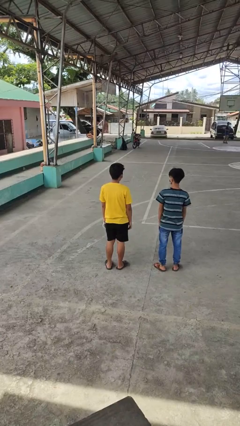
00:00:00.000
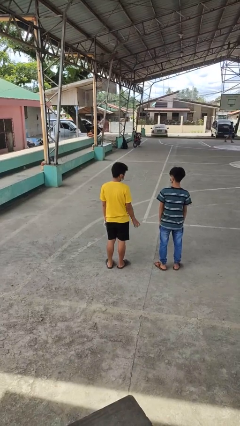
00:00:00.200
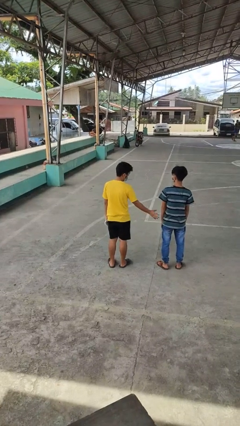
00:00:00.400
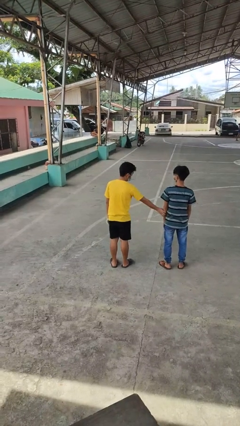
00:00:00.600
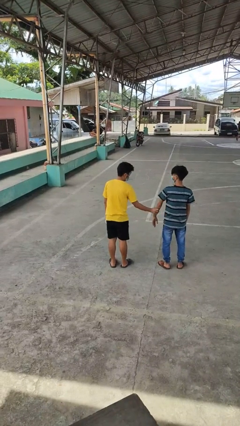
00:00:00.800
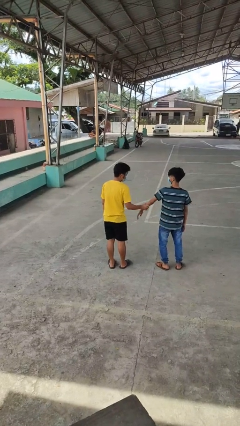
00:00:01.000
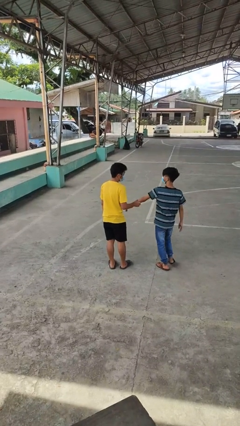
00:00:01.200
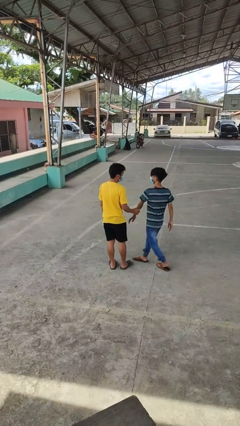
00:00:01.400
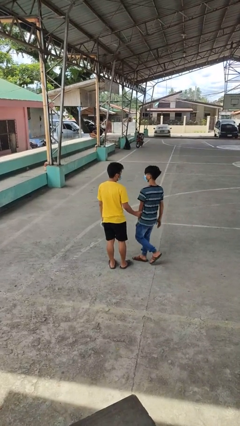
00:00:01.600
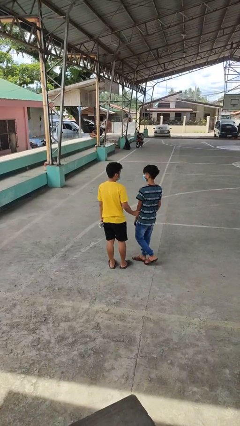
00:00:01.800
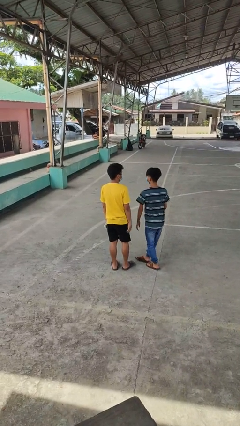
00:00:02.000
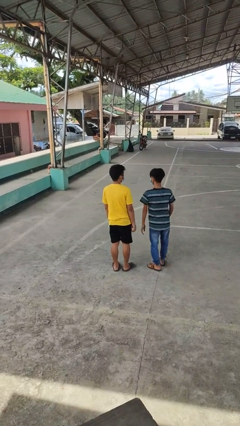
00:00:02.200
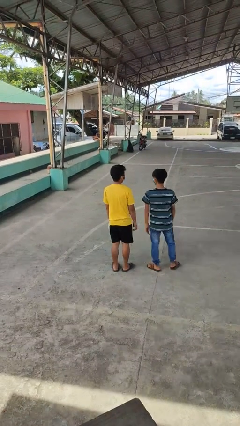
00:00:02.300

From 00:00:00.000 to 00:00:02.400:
person grabs person by forearm

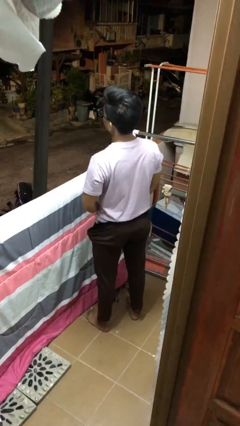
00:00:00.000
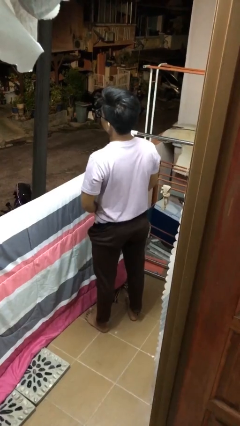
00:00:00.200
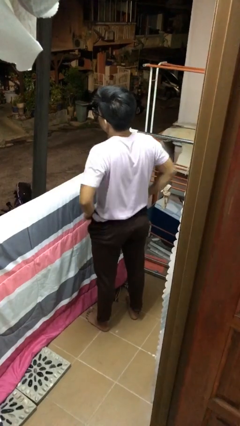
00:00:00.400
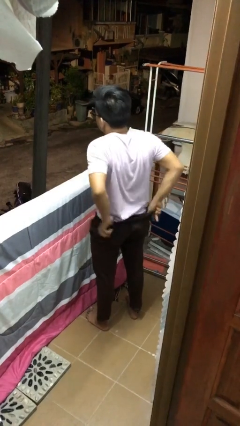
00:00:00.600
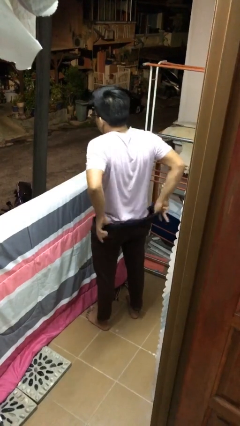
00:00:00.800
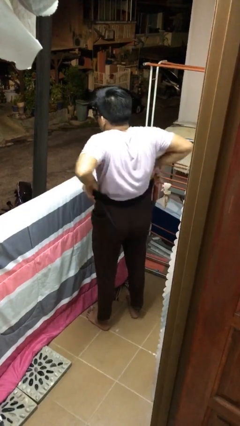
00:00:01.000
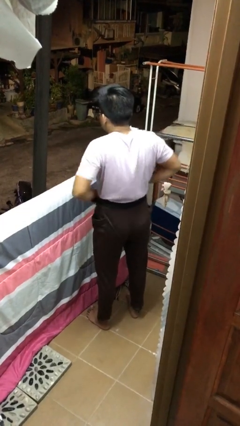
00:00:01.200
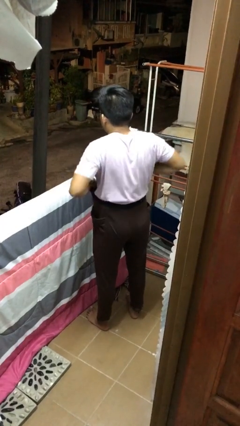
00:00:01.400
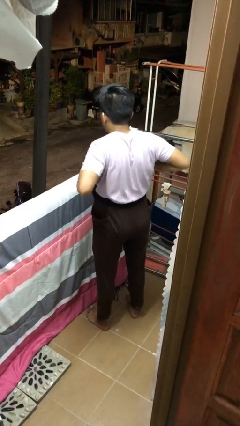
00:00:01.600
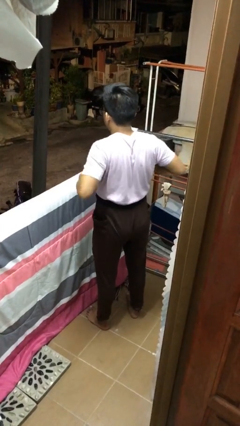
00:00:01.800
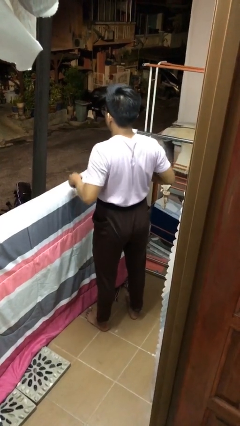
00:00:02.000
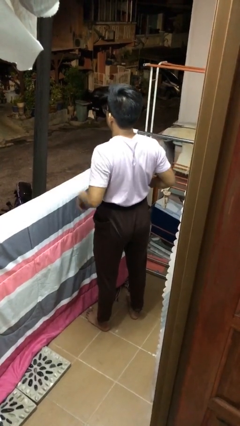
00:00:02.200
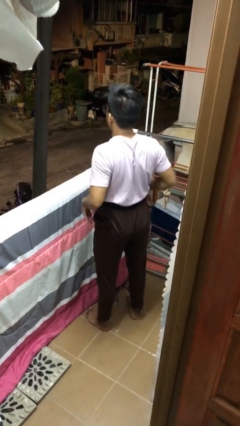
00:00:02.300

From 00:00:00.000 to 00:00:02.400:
person hikes up pants

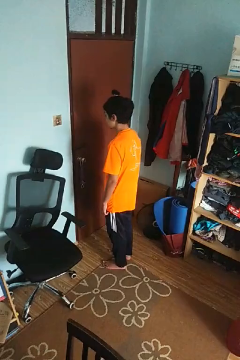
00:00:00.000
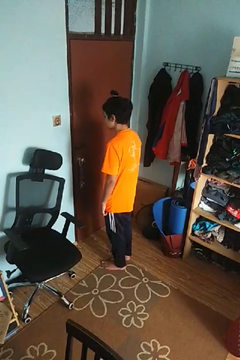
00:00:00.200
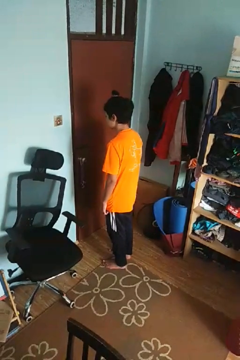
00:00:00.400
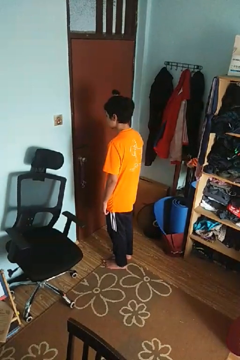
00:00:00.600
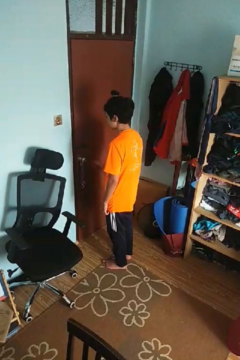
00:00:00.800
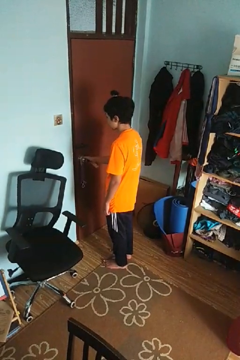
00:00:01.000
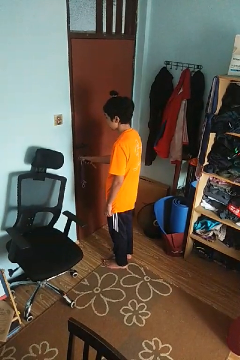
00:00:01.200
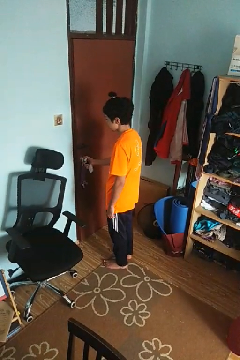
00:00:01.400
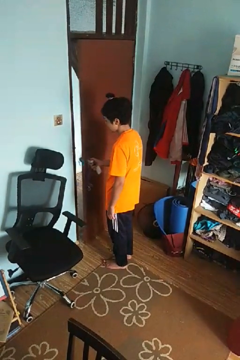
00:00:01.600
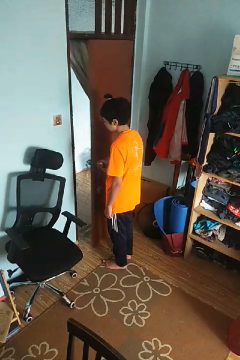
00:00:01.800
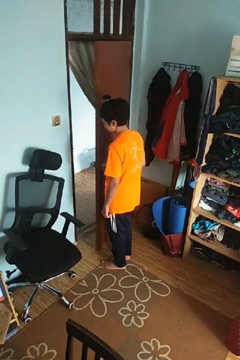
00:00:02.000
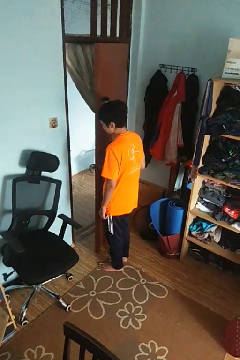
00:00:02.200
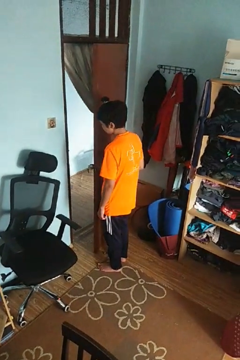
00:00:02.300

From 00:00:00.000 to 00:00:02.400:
person opens facility door

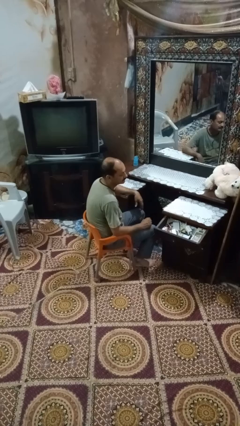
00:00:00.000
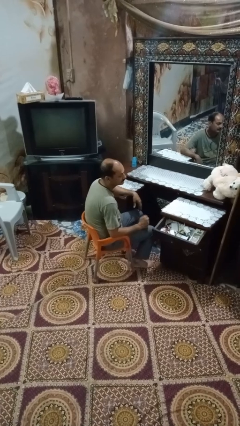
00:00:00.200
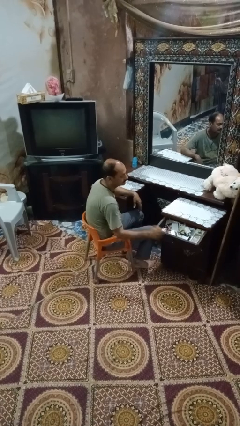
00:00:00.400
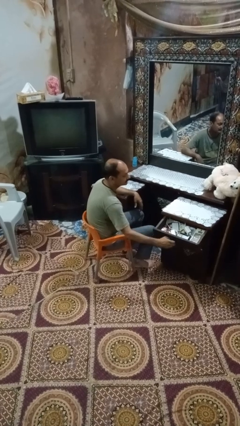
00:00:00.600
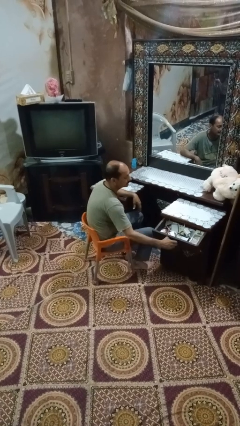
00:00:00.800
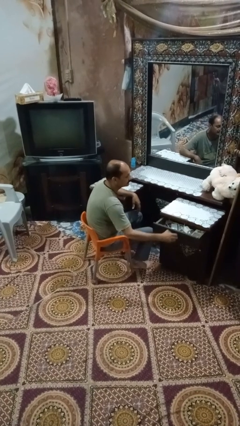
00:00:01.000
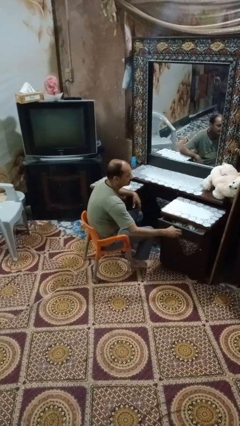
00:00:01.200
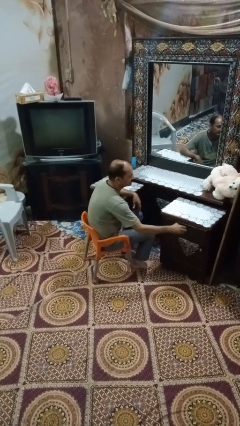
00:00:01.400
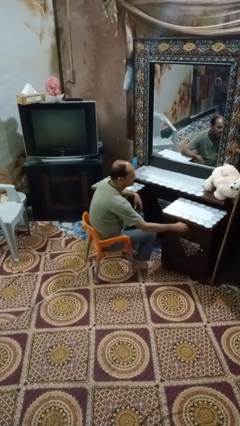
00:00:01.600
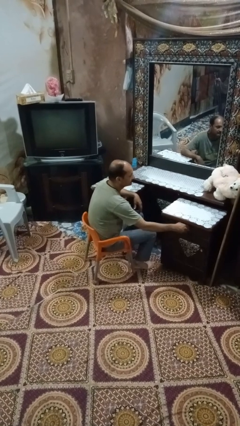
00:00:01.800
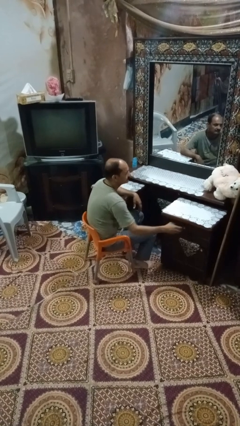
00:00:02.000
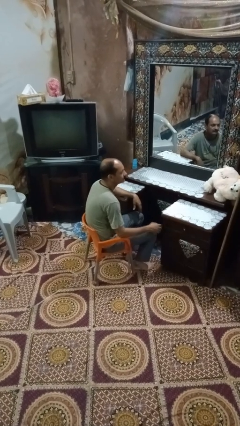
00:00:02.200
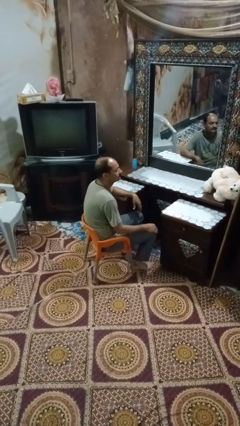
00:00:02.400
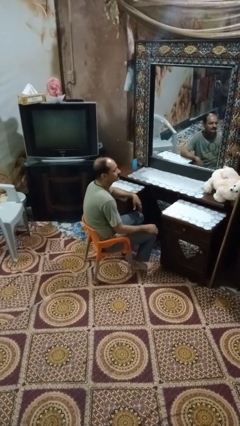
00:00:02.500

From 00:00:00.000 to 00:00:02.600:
person closes dresser drawer

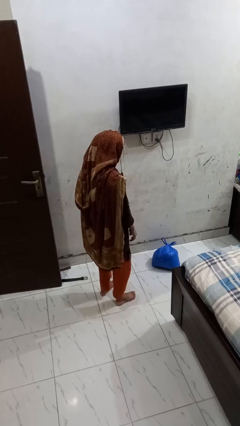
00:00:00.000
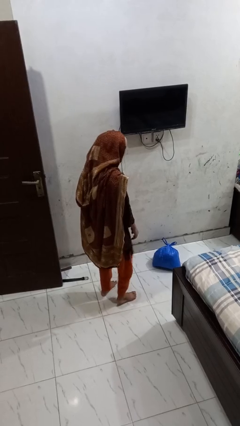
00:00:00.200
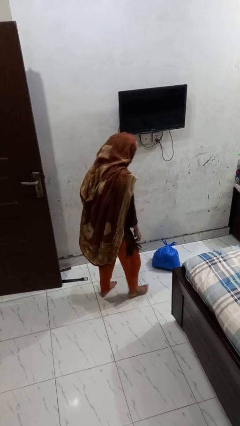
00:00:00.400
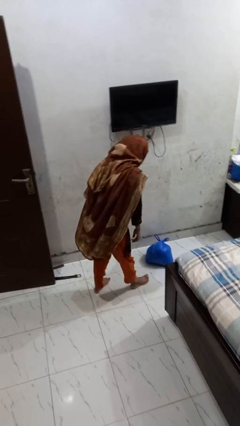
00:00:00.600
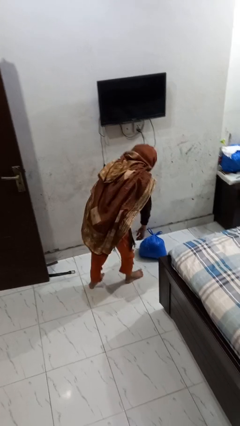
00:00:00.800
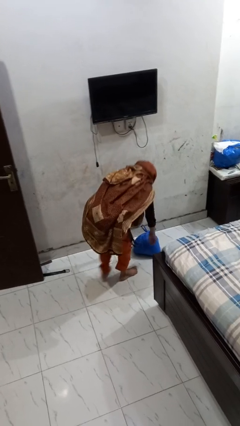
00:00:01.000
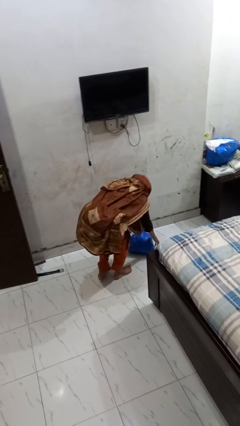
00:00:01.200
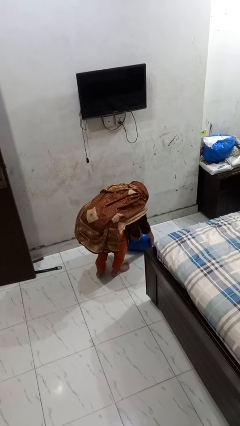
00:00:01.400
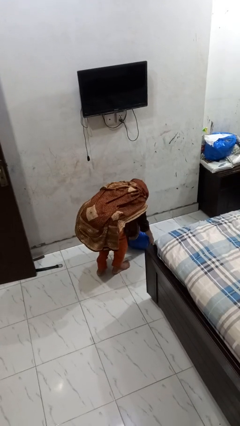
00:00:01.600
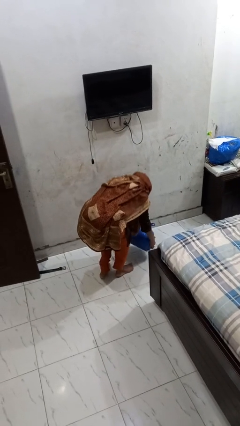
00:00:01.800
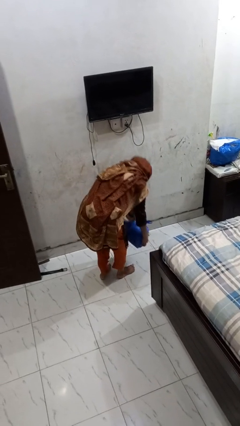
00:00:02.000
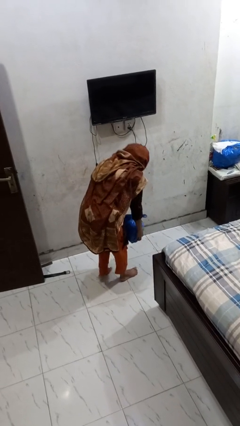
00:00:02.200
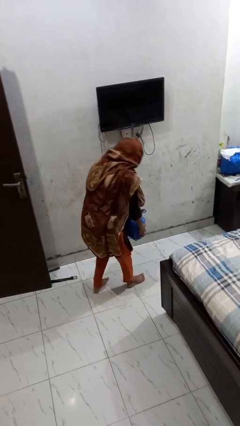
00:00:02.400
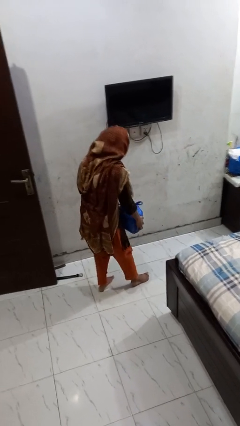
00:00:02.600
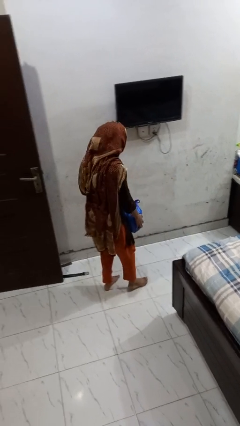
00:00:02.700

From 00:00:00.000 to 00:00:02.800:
person picks up object from floor

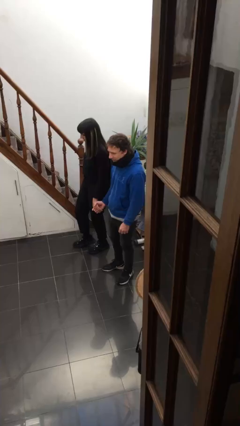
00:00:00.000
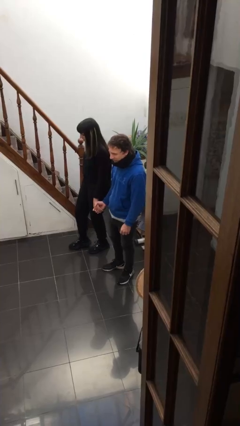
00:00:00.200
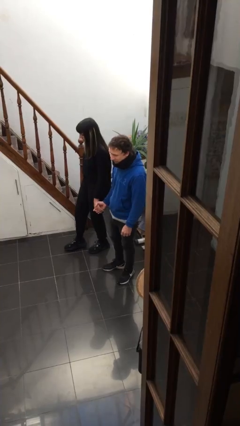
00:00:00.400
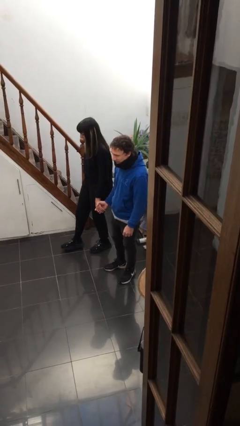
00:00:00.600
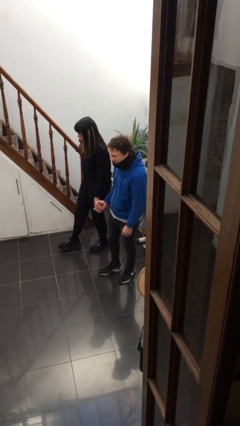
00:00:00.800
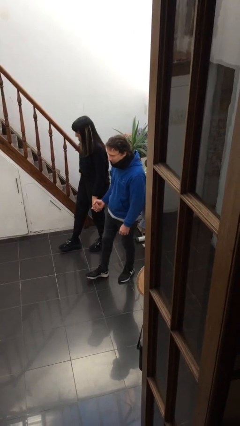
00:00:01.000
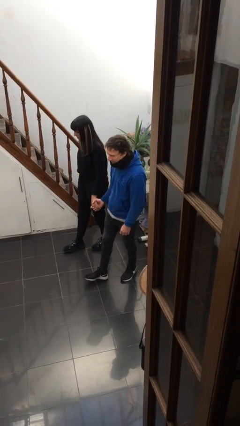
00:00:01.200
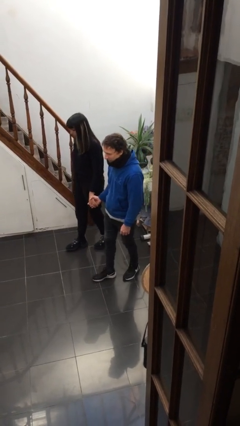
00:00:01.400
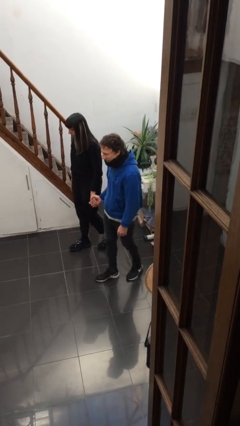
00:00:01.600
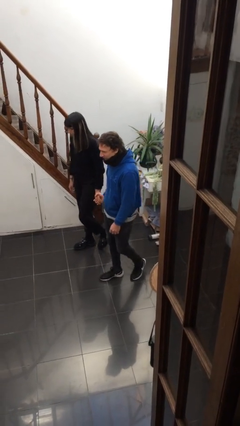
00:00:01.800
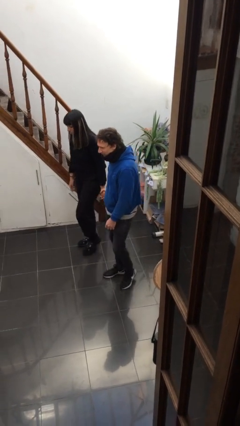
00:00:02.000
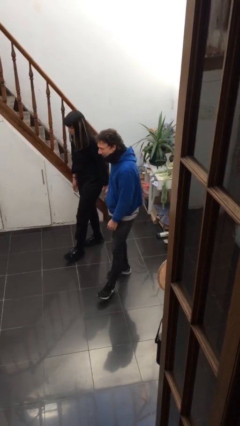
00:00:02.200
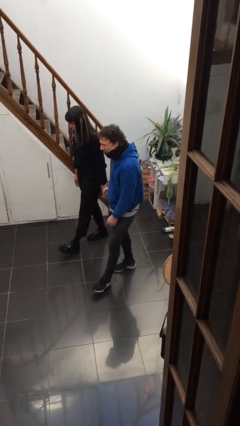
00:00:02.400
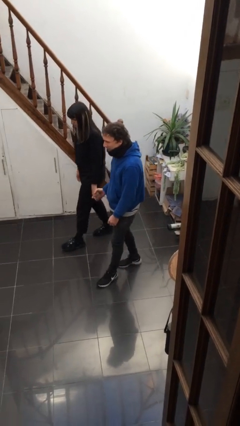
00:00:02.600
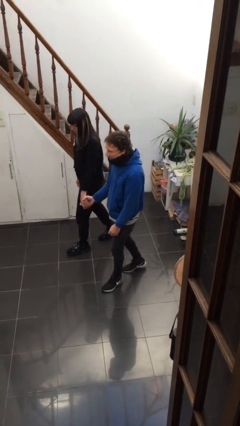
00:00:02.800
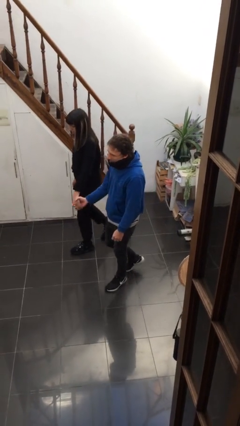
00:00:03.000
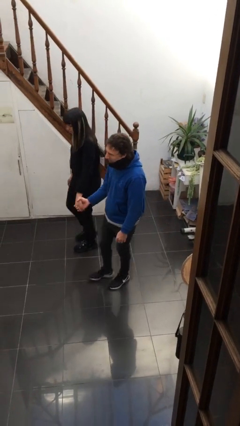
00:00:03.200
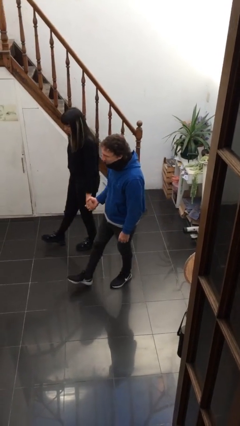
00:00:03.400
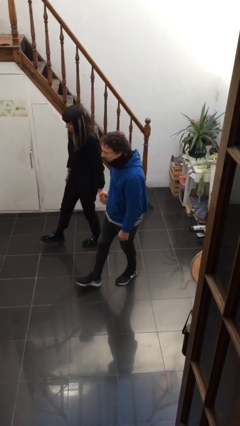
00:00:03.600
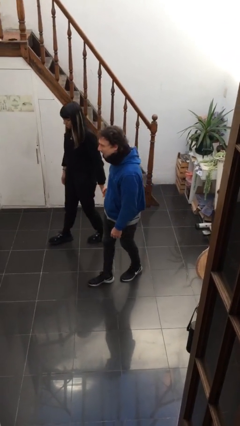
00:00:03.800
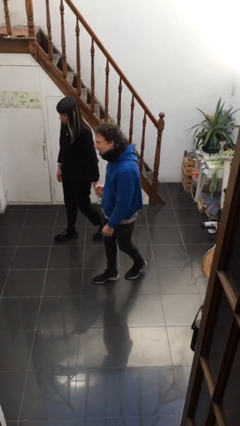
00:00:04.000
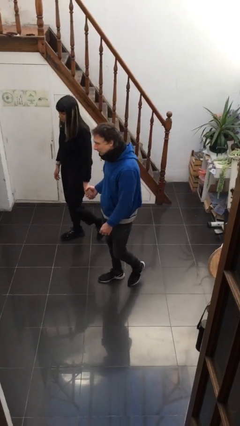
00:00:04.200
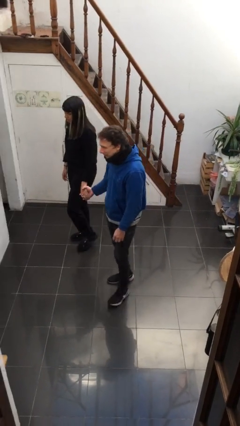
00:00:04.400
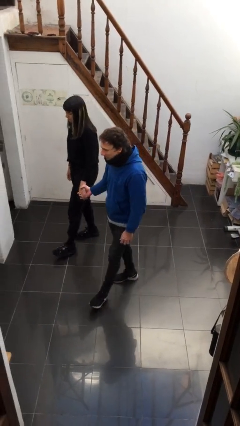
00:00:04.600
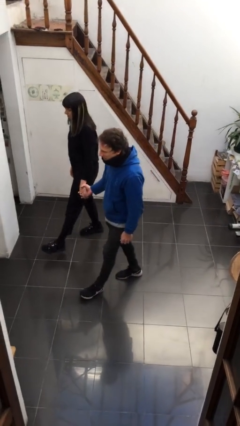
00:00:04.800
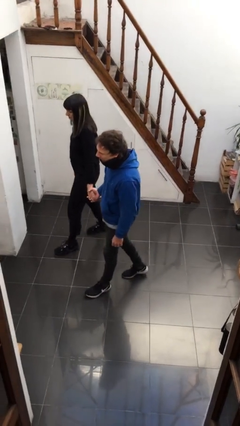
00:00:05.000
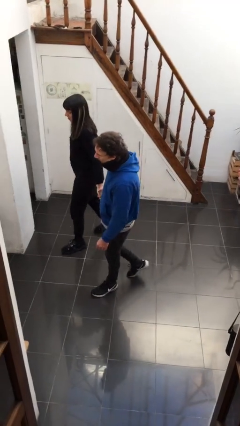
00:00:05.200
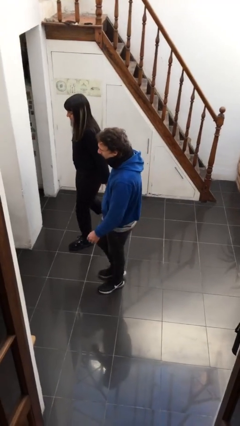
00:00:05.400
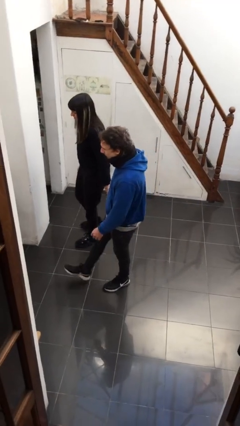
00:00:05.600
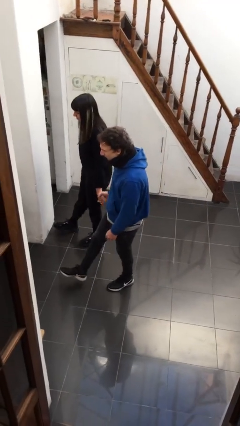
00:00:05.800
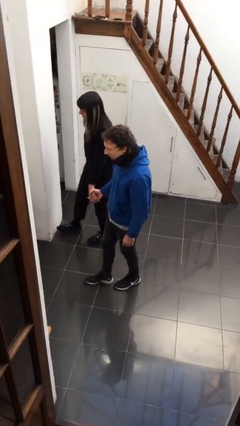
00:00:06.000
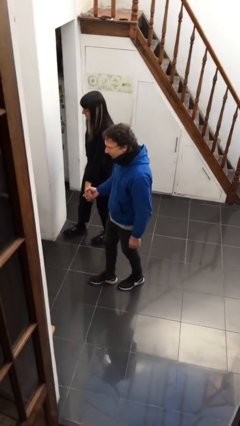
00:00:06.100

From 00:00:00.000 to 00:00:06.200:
person holds hand
